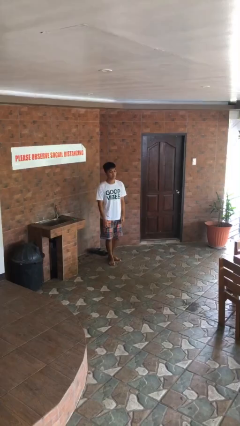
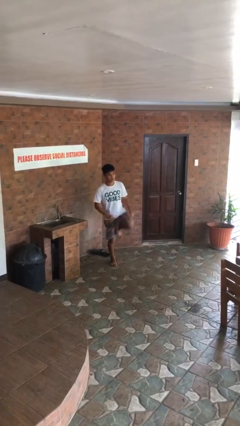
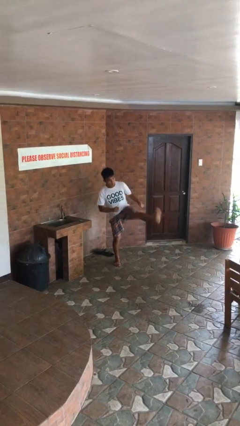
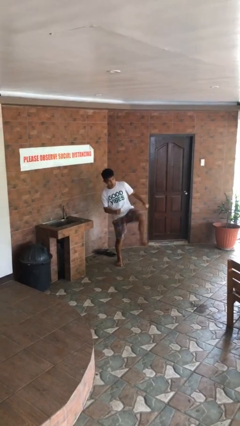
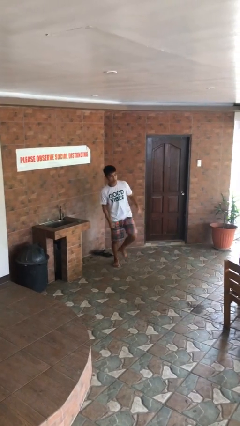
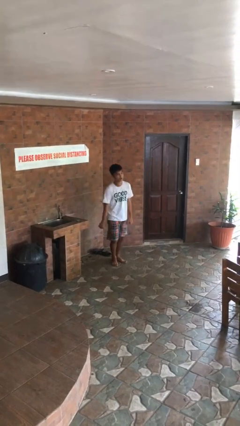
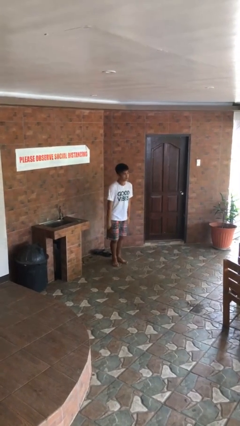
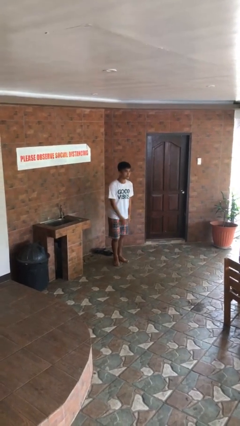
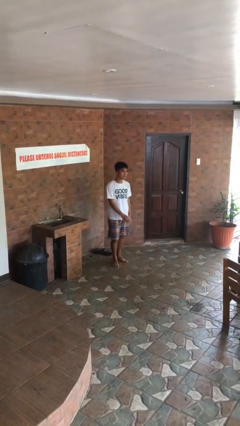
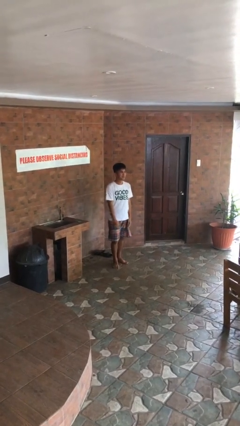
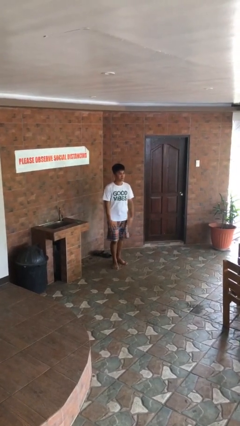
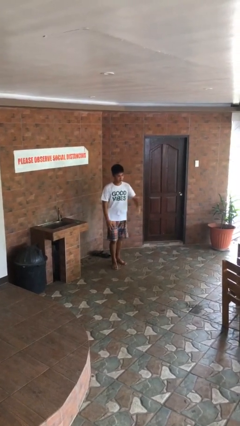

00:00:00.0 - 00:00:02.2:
person karate kicks

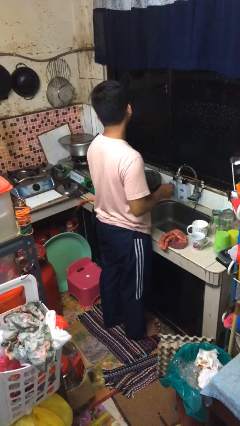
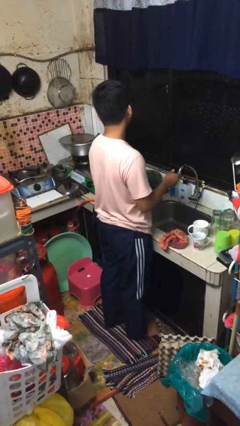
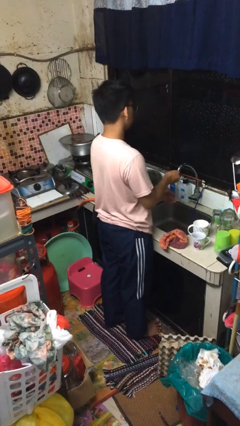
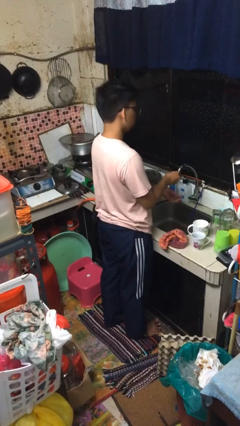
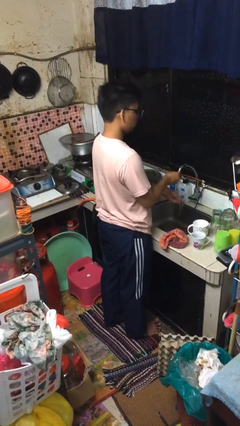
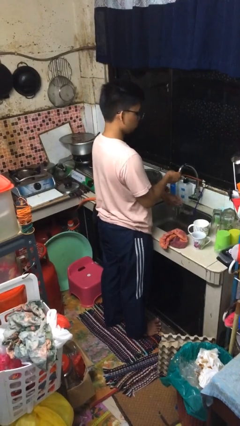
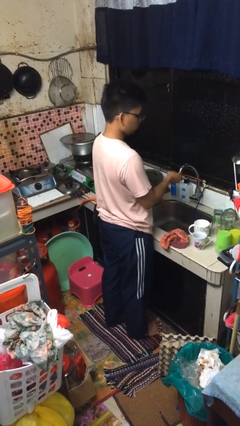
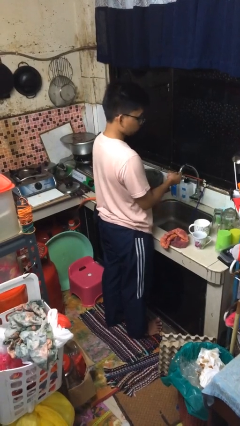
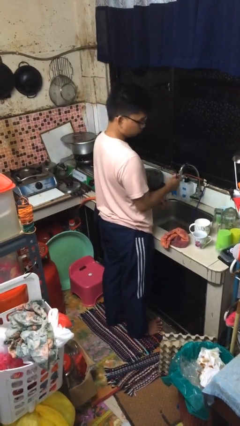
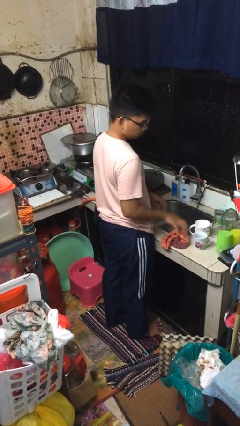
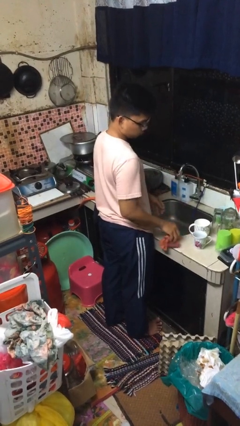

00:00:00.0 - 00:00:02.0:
person washes hands

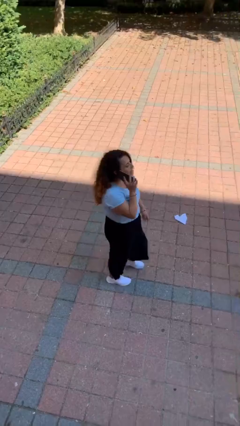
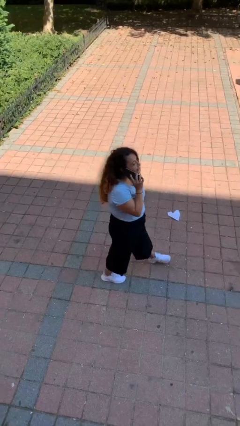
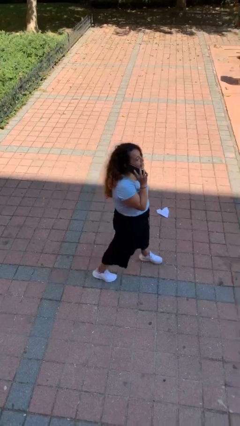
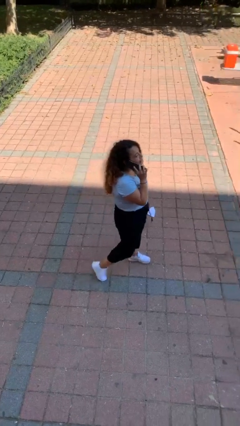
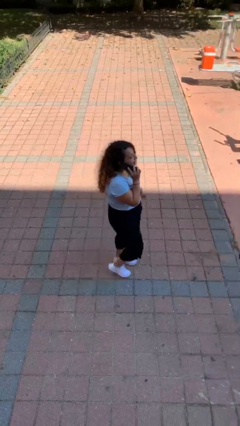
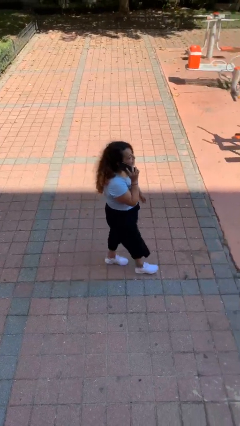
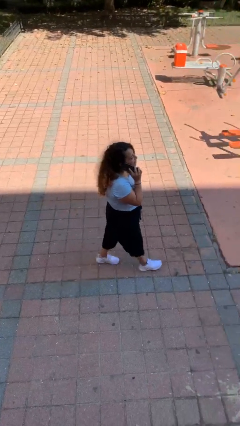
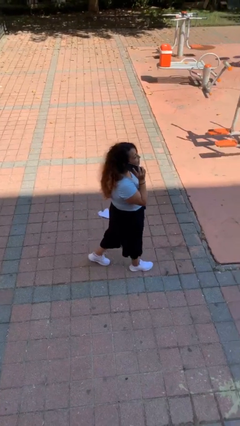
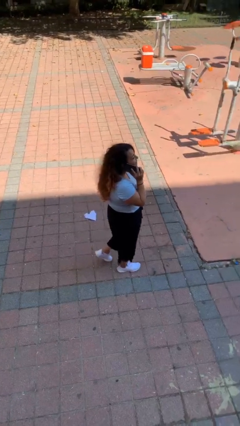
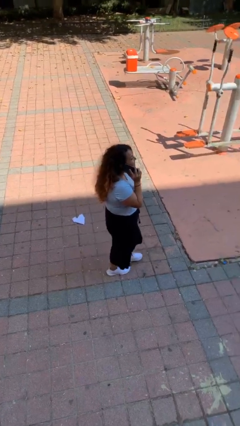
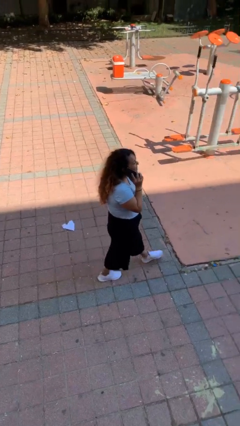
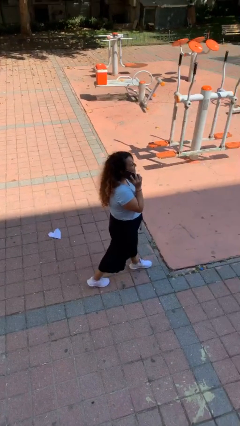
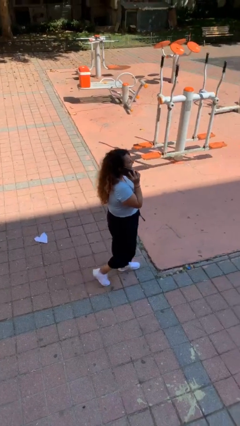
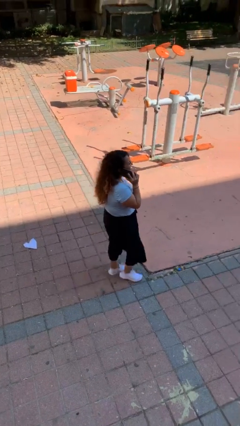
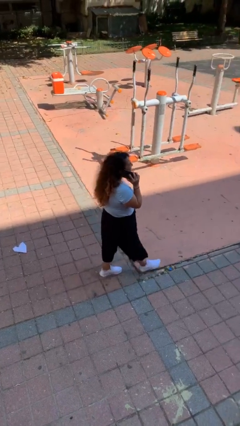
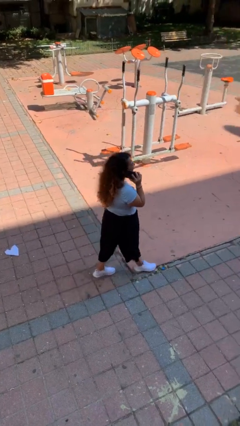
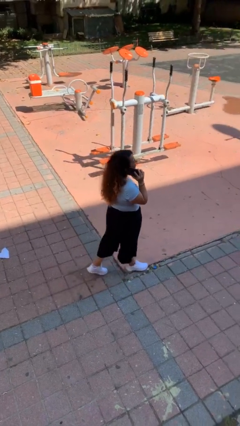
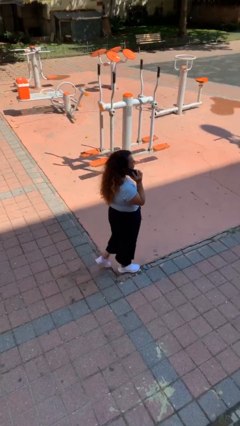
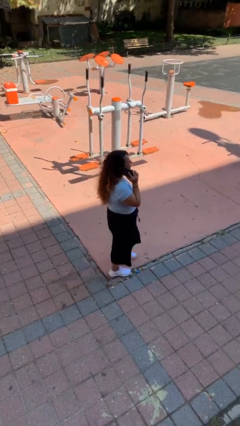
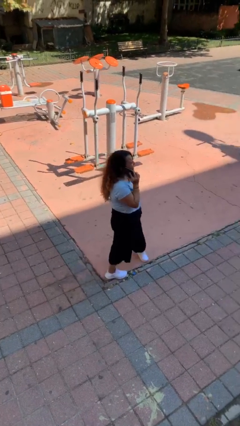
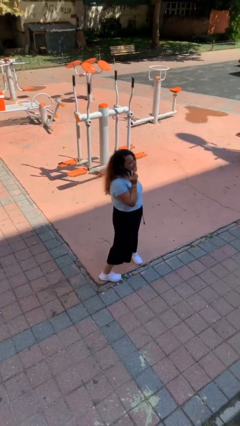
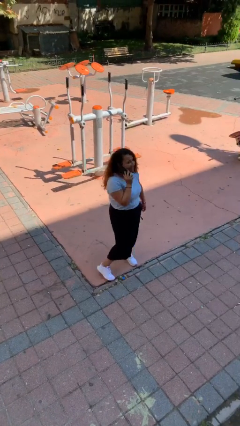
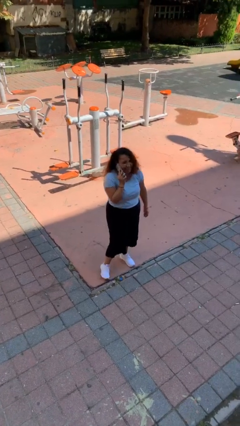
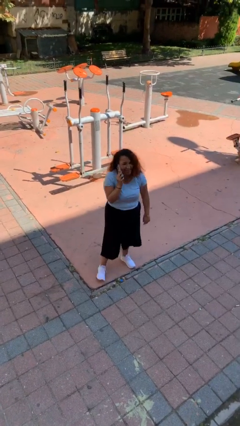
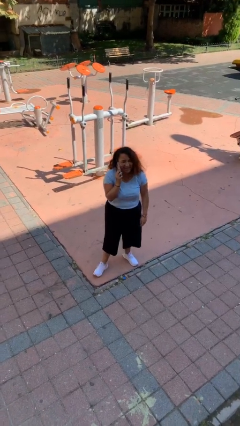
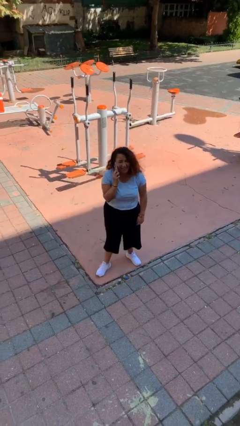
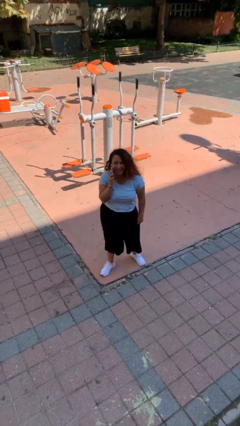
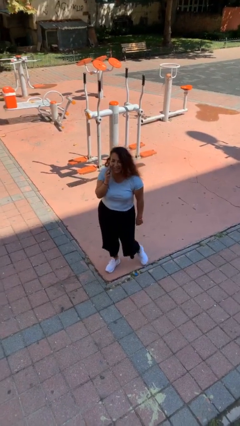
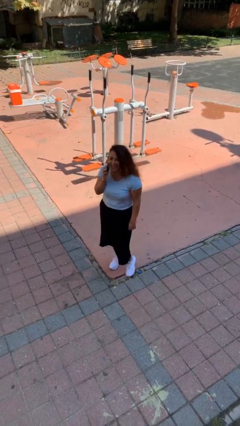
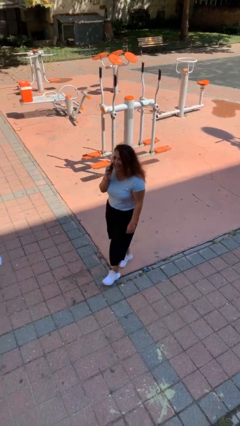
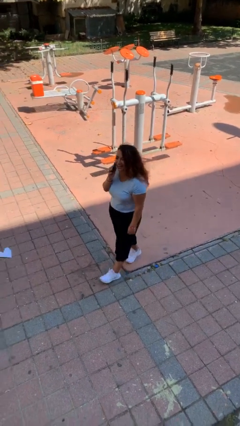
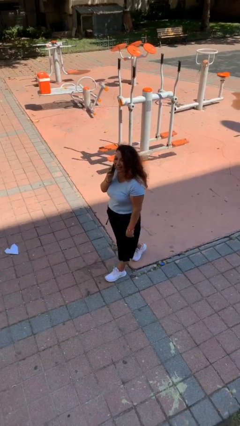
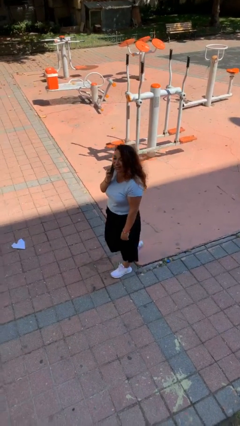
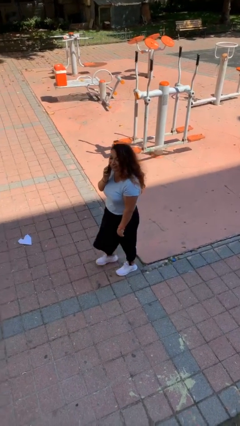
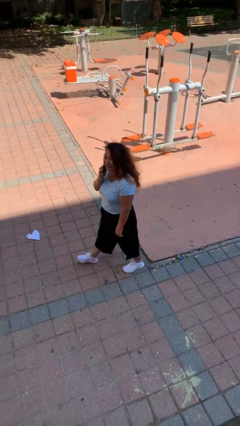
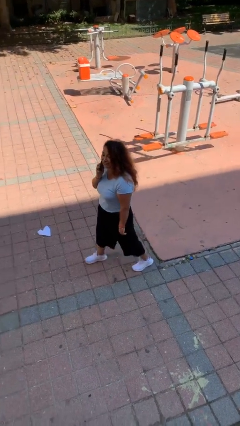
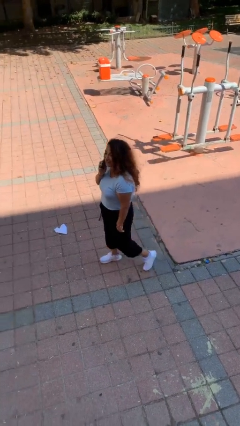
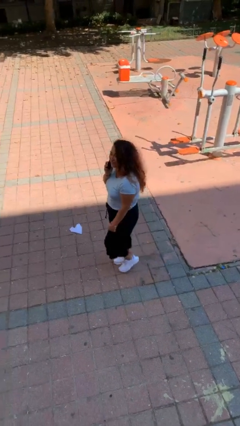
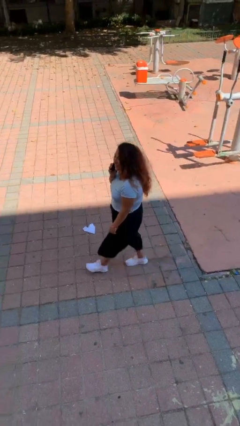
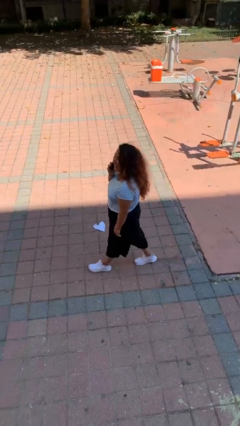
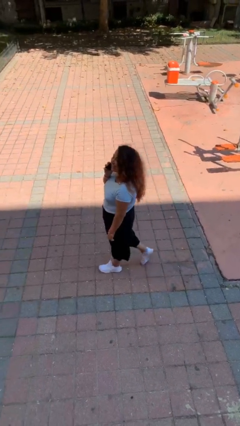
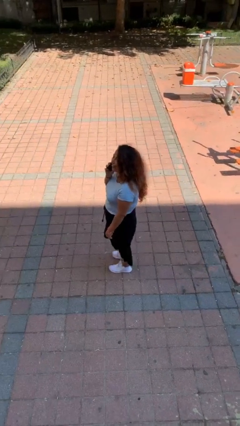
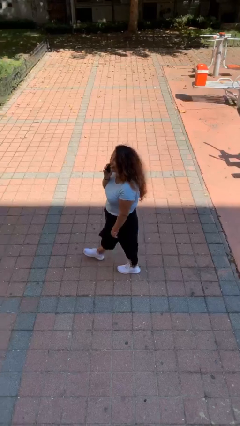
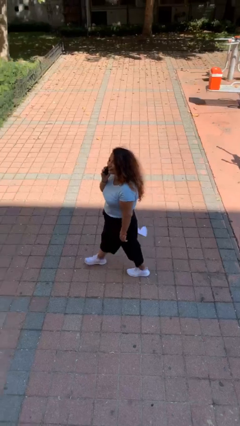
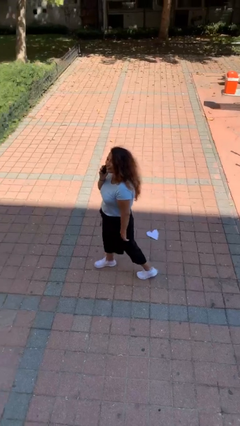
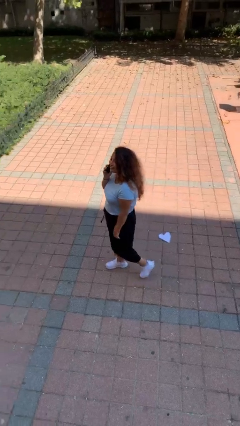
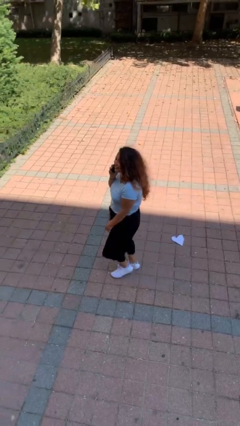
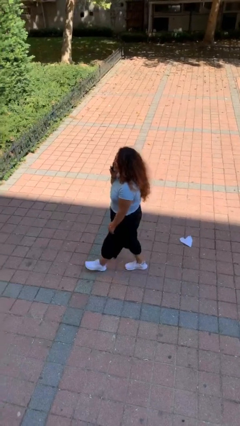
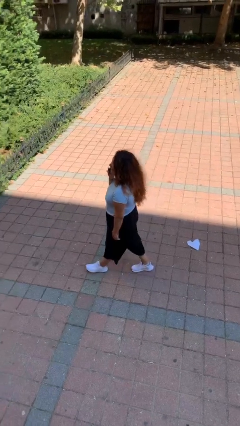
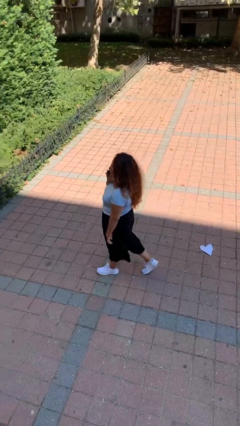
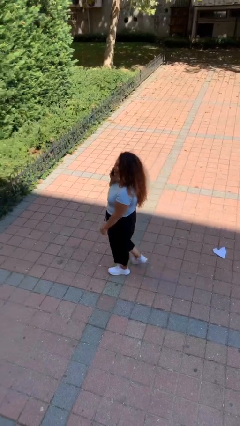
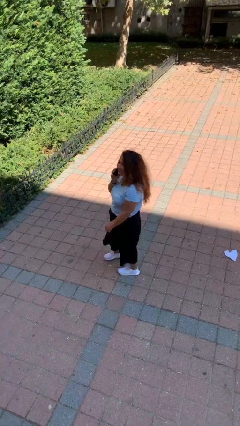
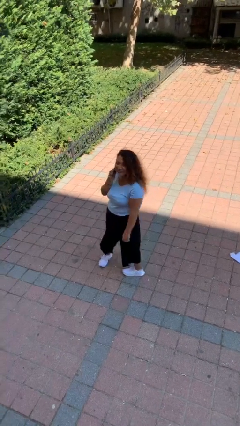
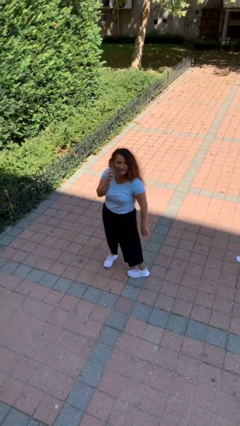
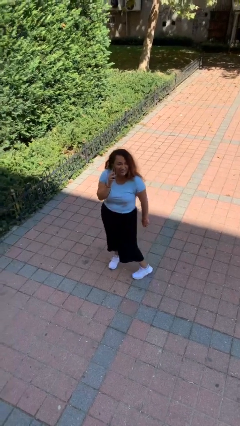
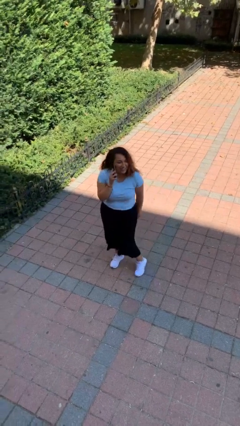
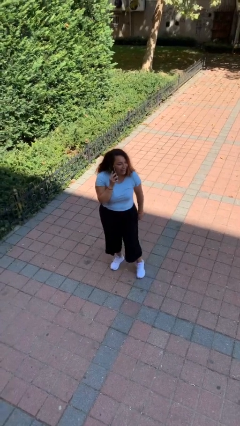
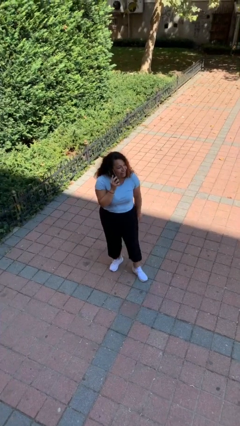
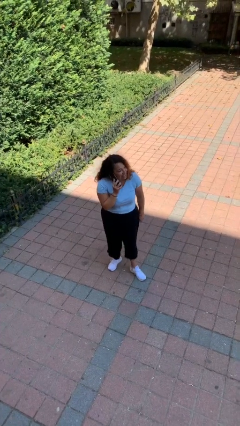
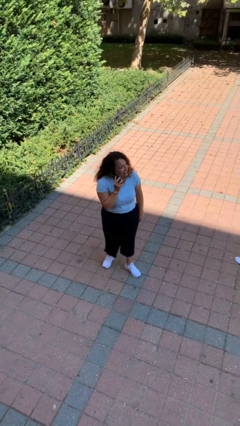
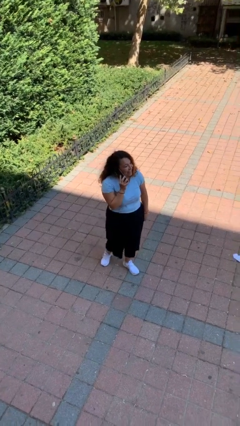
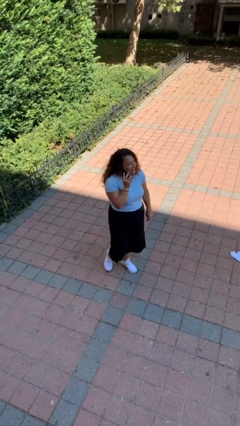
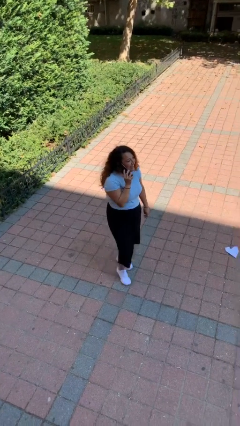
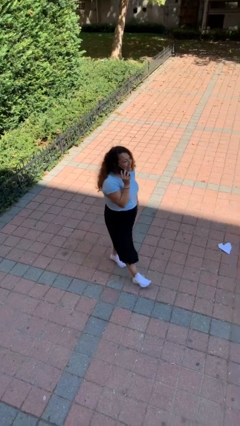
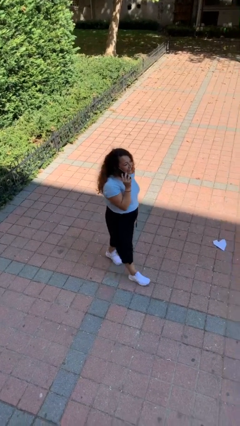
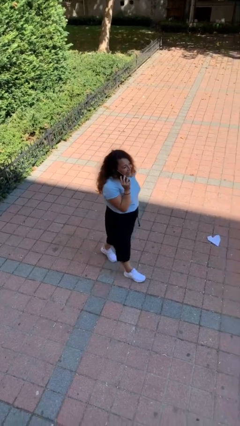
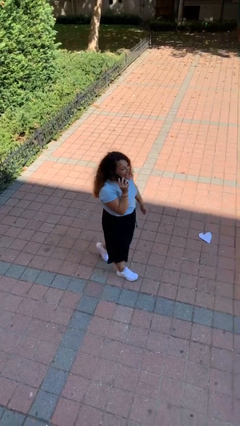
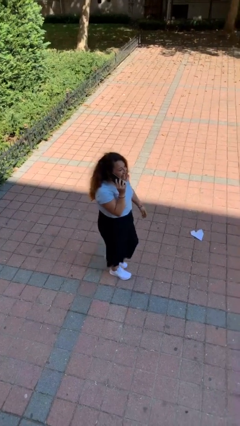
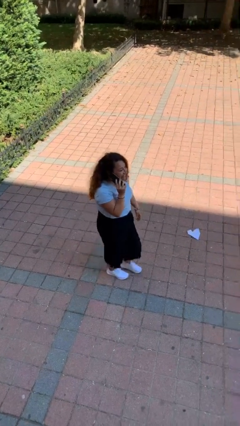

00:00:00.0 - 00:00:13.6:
person talks on phone
